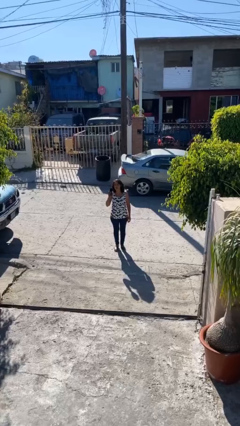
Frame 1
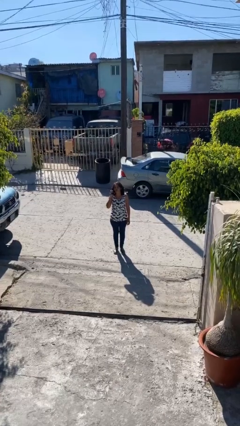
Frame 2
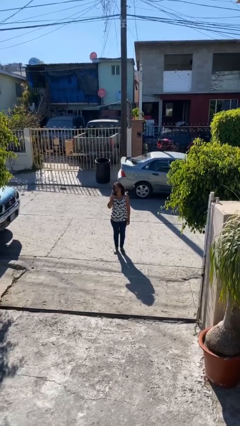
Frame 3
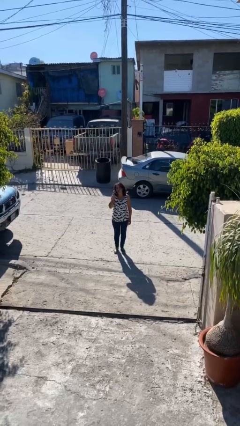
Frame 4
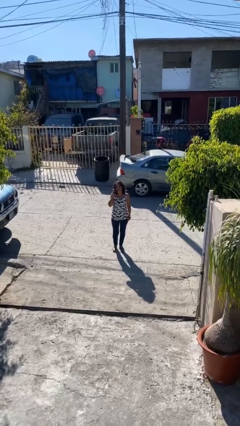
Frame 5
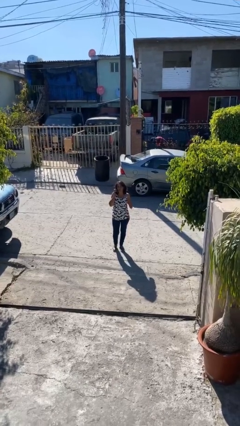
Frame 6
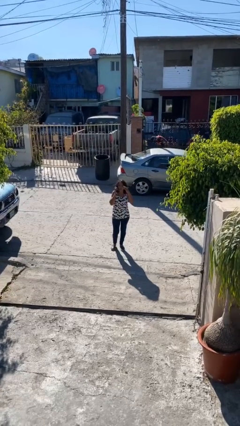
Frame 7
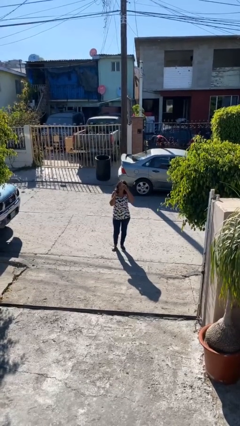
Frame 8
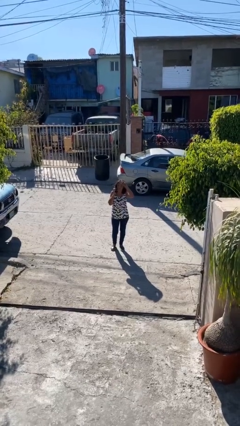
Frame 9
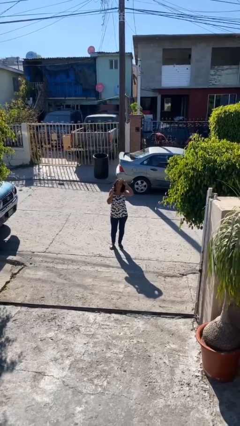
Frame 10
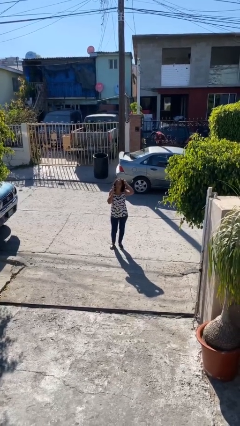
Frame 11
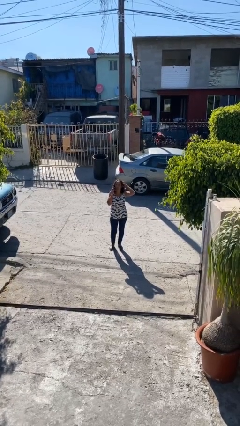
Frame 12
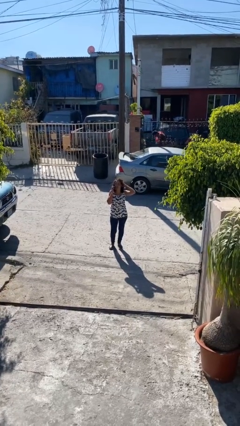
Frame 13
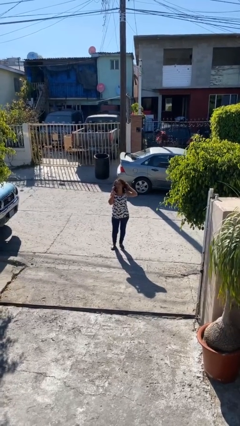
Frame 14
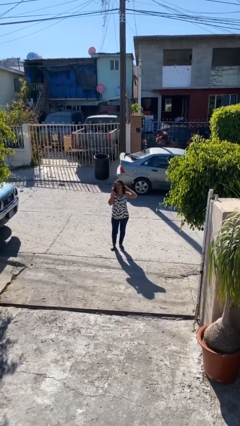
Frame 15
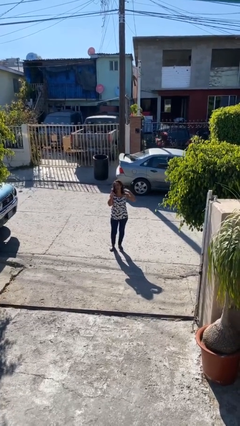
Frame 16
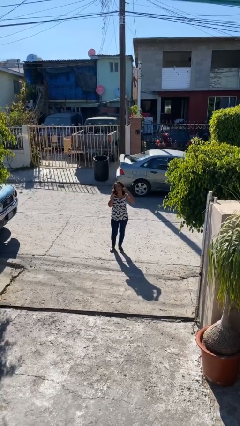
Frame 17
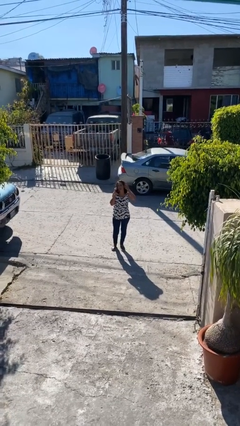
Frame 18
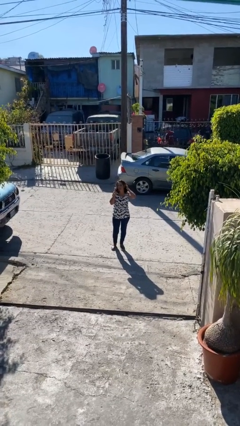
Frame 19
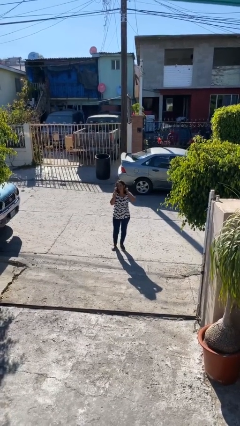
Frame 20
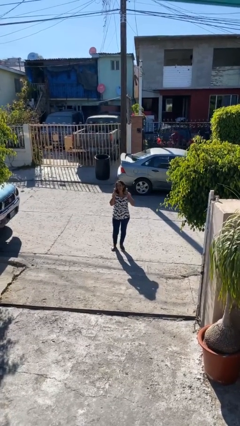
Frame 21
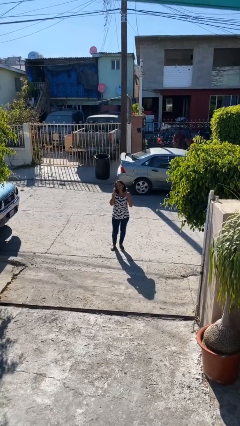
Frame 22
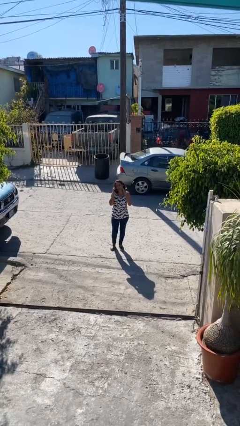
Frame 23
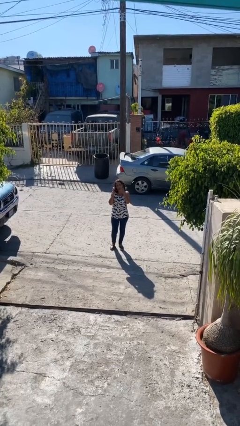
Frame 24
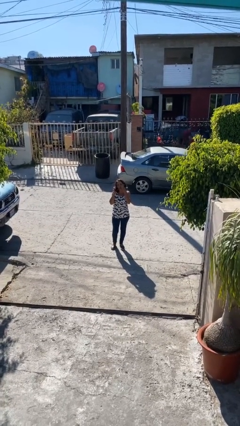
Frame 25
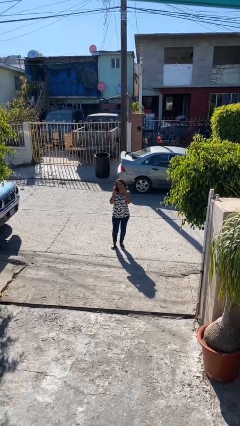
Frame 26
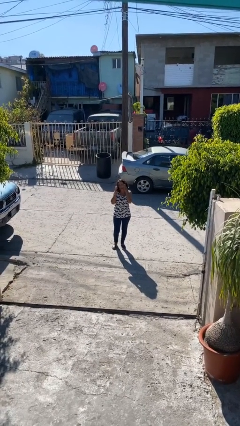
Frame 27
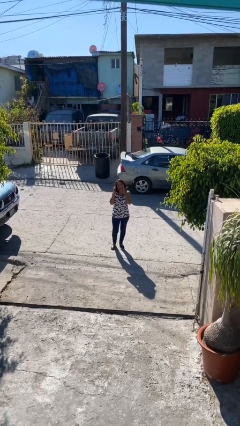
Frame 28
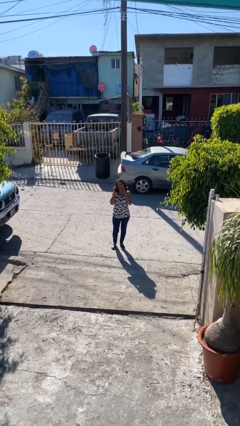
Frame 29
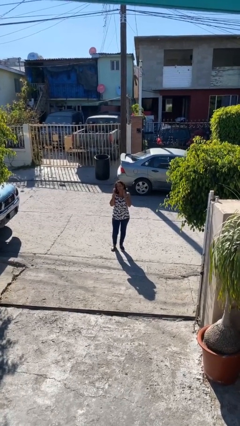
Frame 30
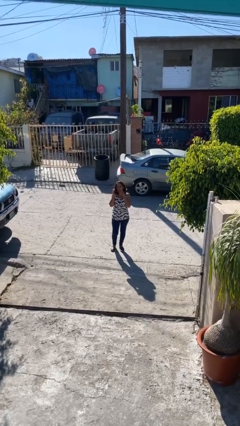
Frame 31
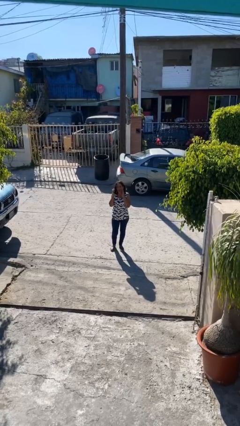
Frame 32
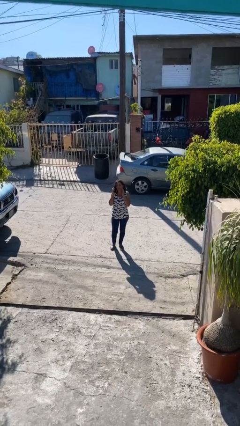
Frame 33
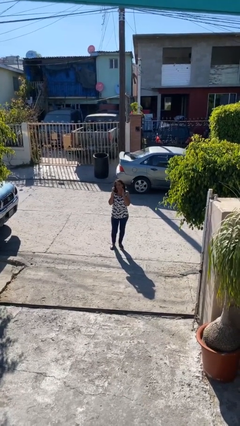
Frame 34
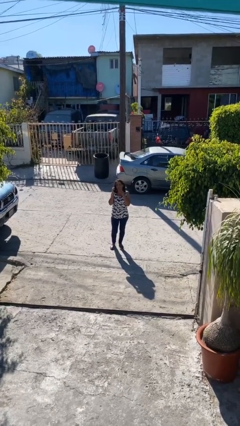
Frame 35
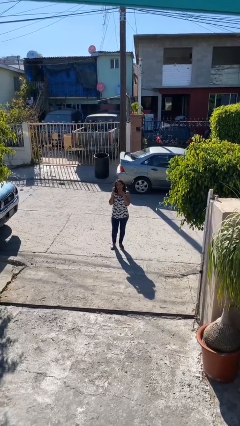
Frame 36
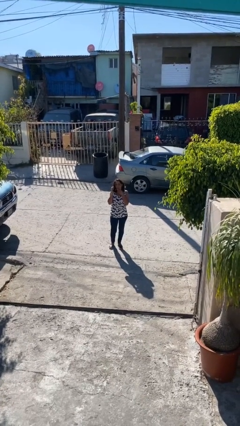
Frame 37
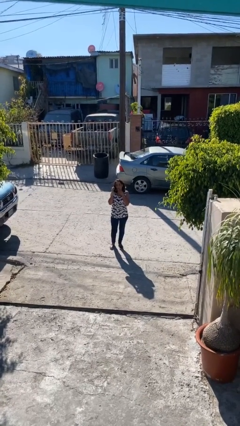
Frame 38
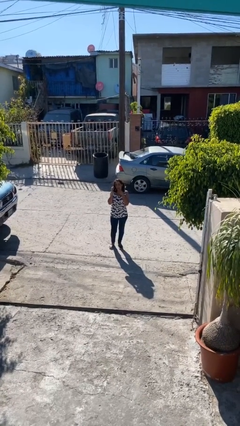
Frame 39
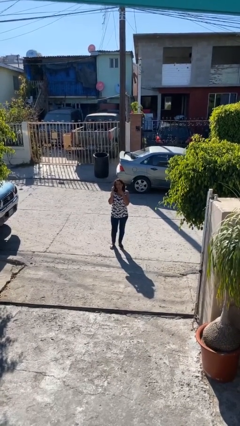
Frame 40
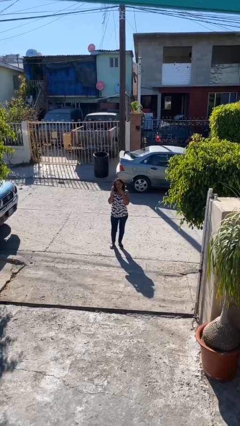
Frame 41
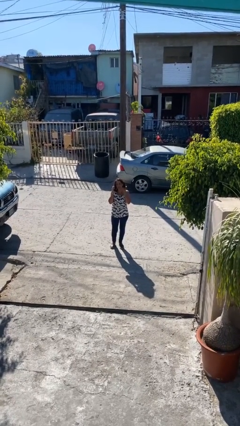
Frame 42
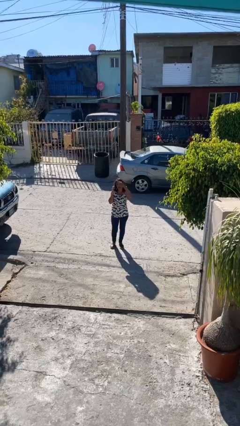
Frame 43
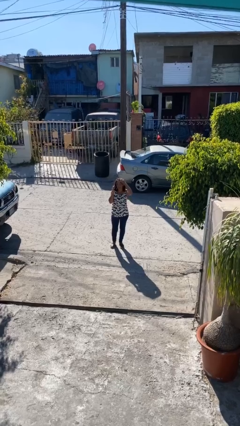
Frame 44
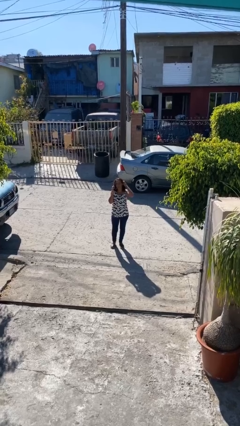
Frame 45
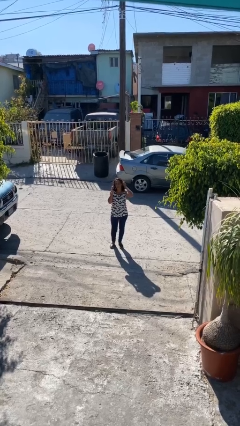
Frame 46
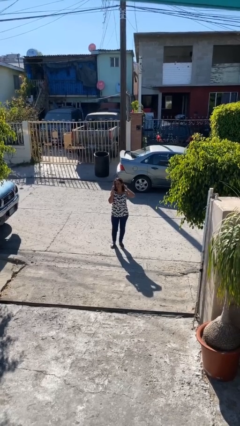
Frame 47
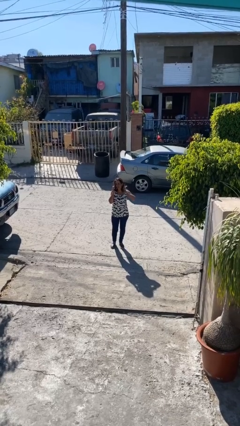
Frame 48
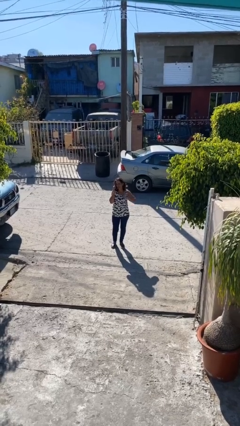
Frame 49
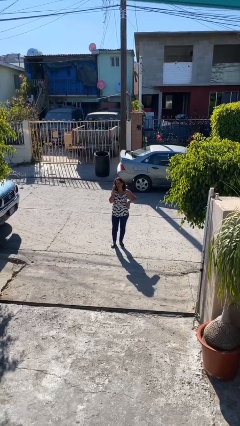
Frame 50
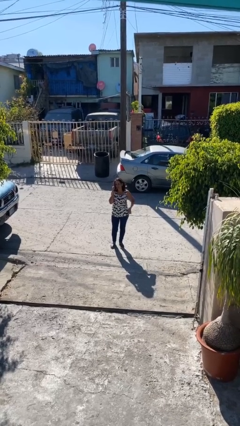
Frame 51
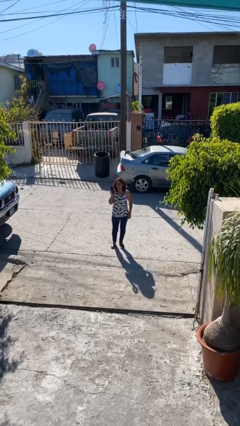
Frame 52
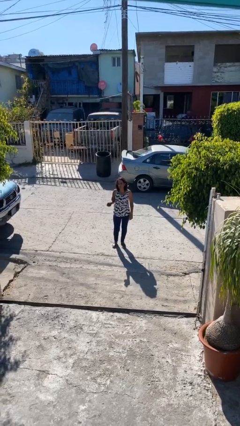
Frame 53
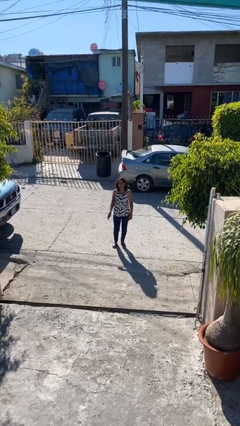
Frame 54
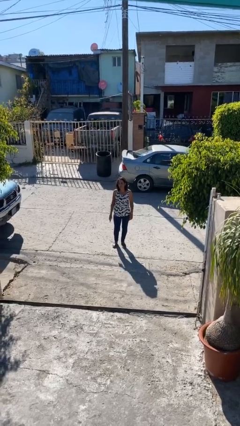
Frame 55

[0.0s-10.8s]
person talks on phone

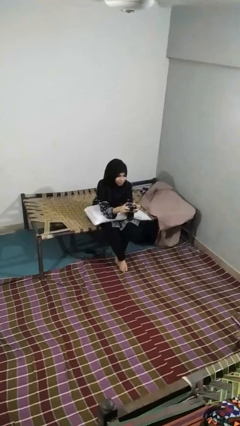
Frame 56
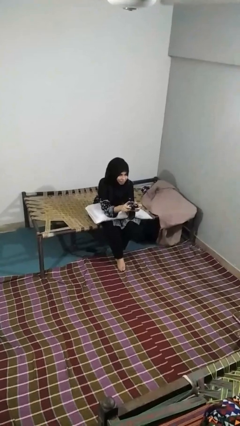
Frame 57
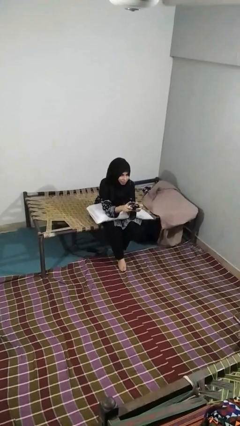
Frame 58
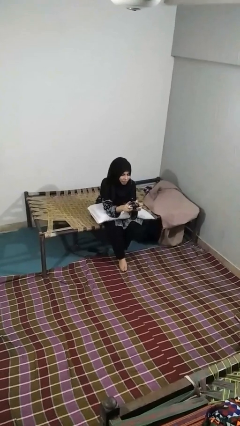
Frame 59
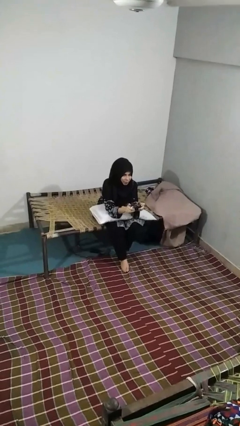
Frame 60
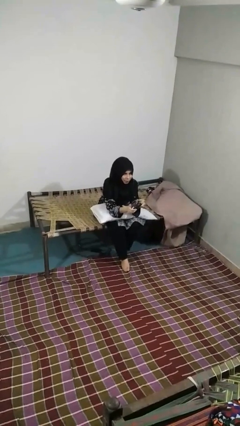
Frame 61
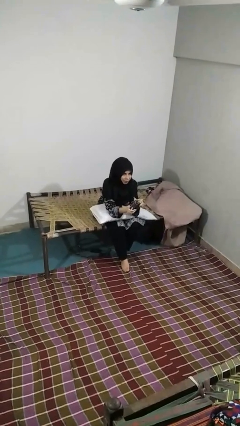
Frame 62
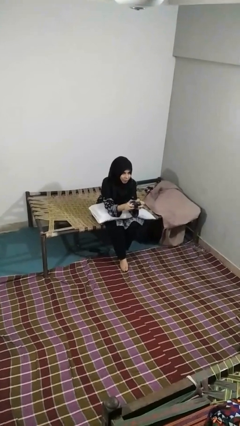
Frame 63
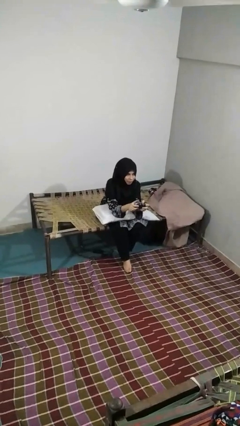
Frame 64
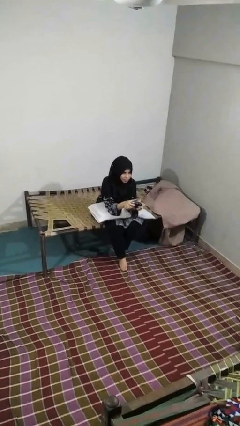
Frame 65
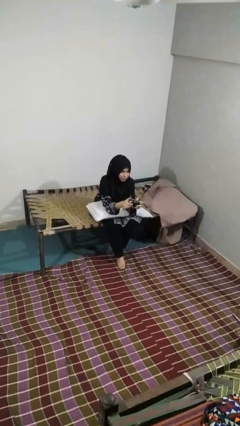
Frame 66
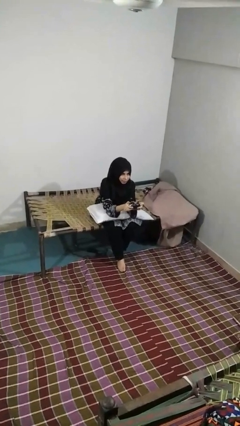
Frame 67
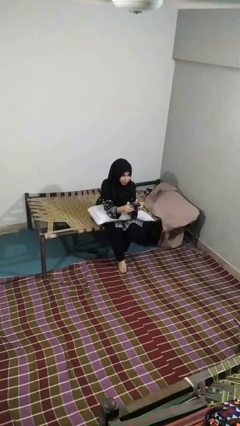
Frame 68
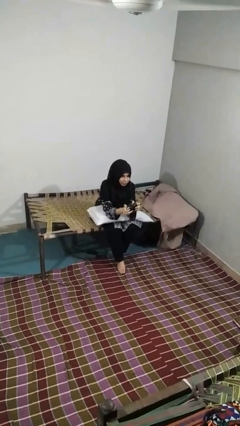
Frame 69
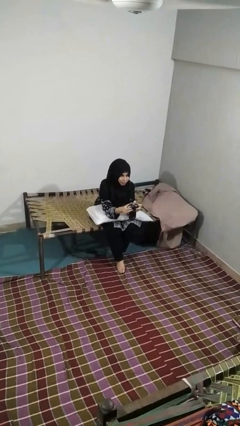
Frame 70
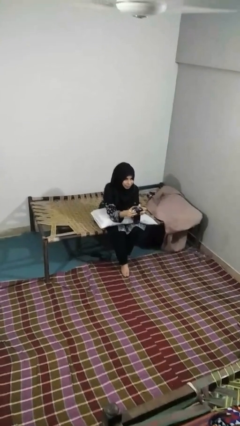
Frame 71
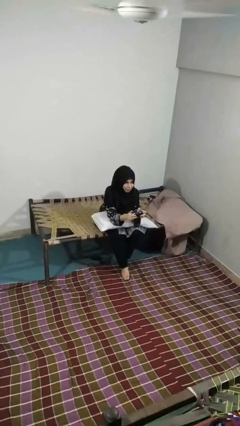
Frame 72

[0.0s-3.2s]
person interacts with handheld game

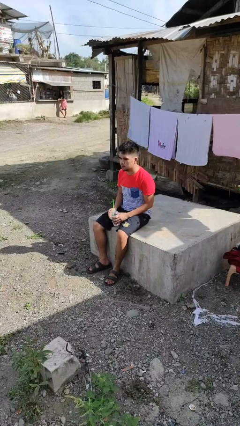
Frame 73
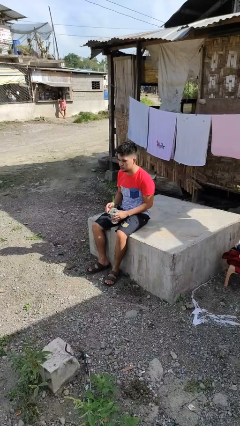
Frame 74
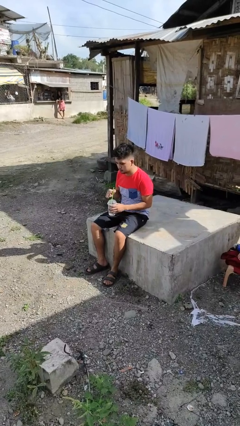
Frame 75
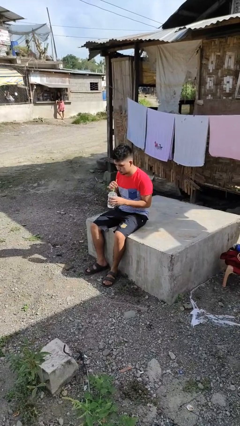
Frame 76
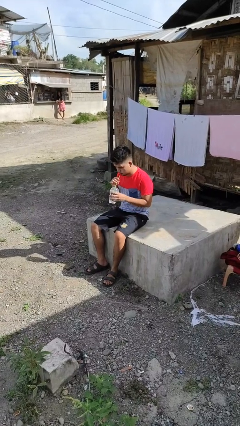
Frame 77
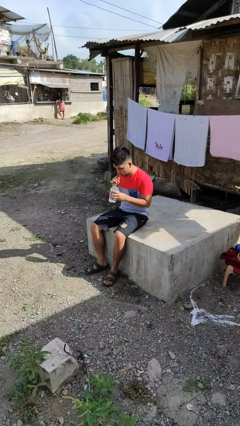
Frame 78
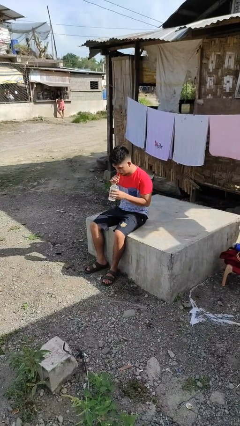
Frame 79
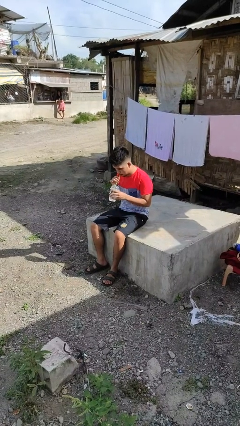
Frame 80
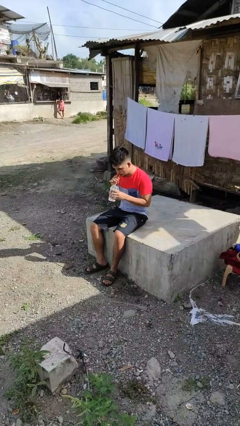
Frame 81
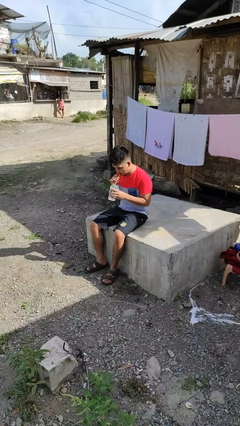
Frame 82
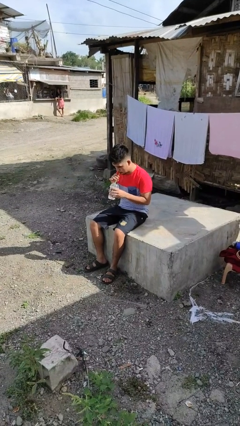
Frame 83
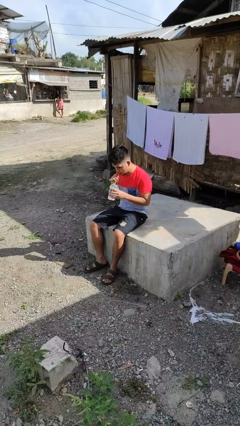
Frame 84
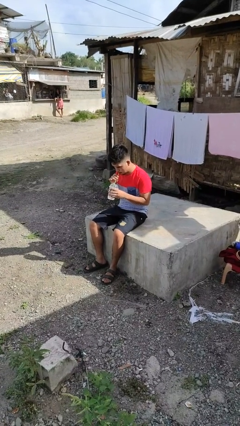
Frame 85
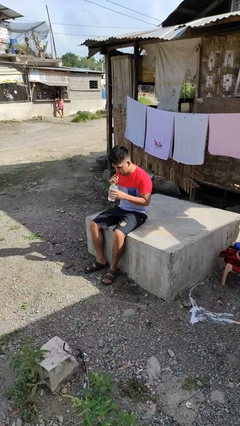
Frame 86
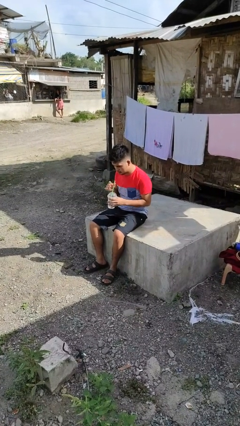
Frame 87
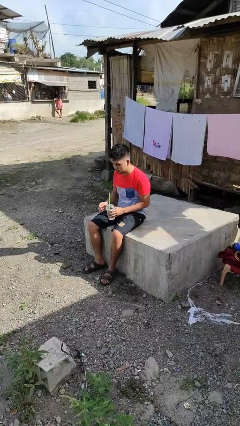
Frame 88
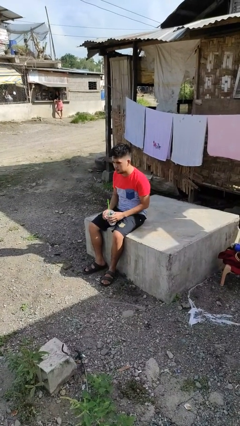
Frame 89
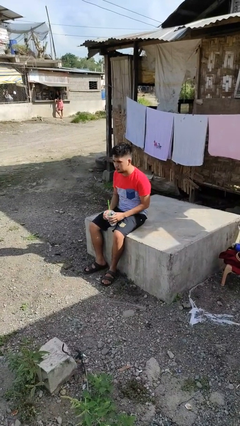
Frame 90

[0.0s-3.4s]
person drinks from straw

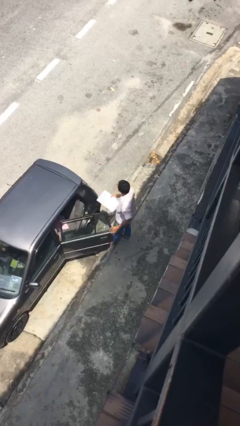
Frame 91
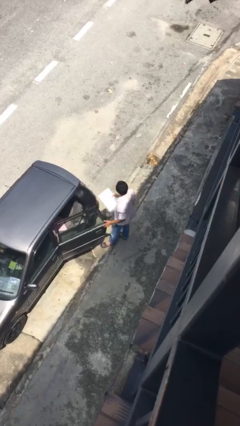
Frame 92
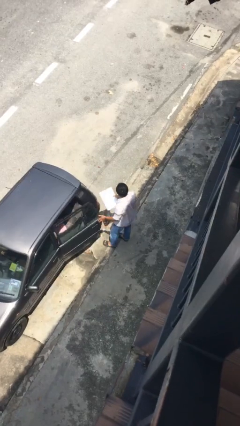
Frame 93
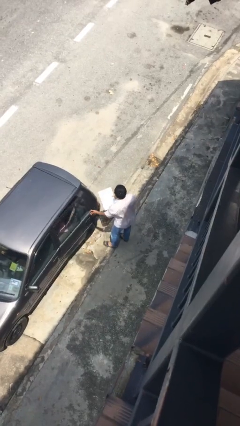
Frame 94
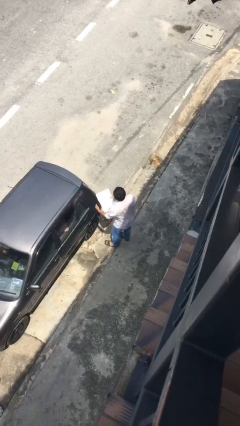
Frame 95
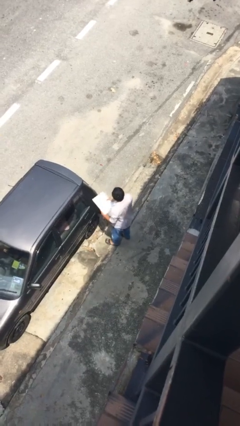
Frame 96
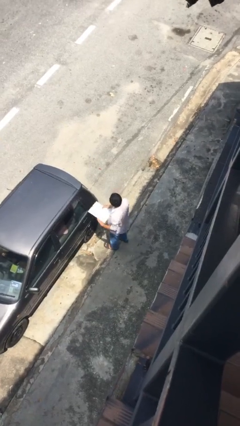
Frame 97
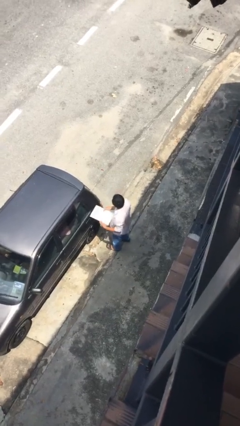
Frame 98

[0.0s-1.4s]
person closes car door
